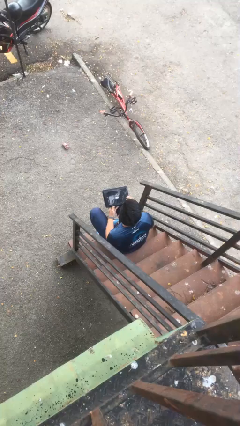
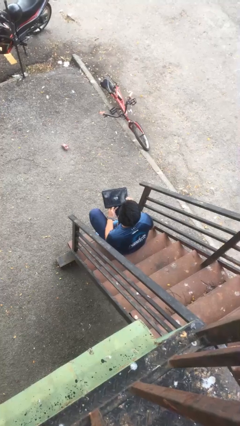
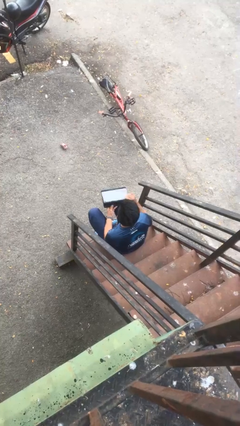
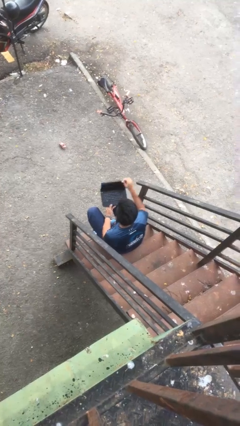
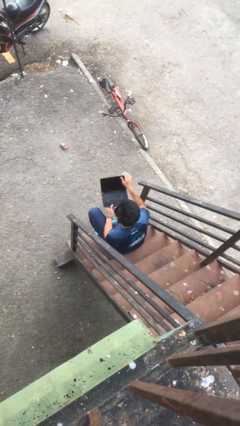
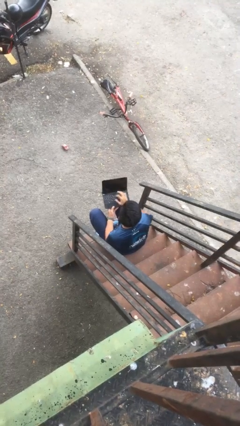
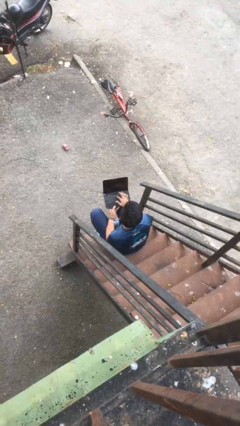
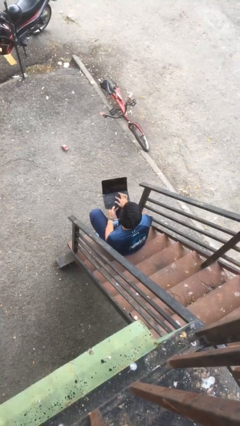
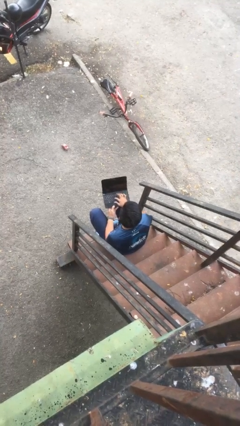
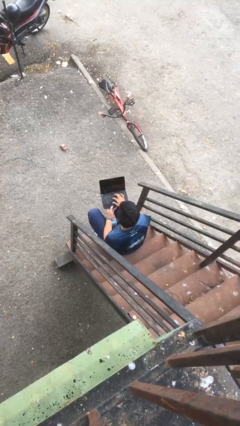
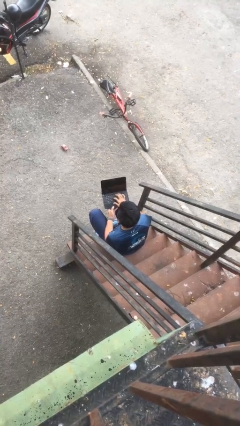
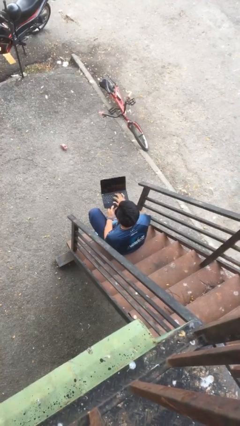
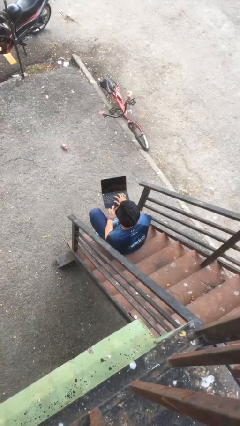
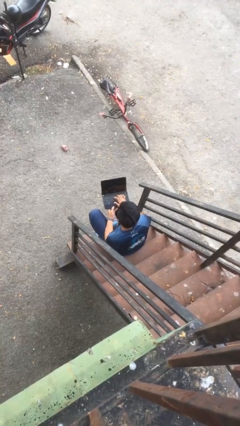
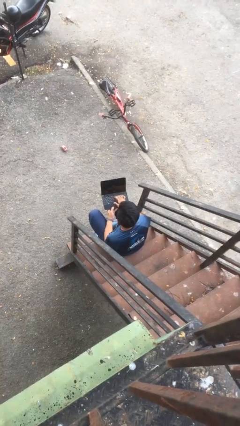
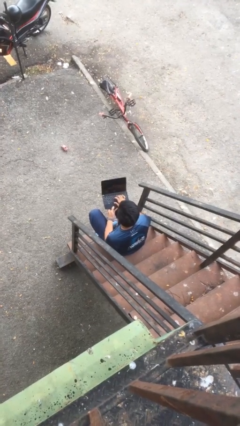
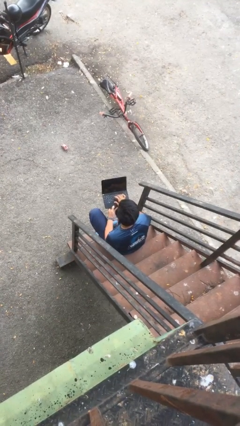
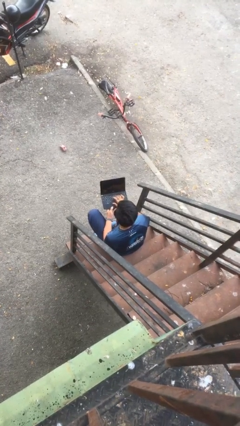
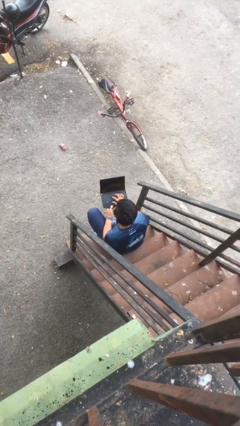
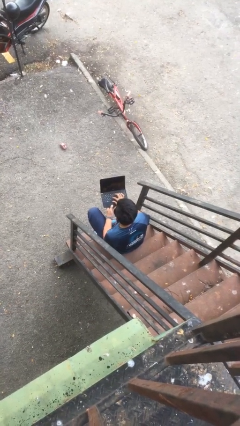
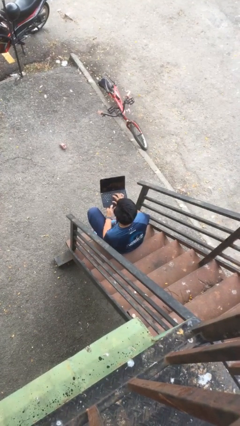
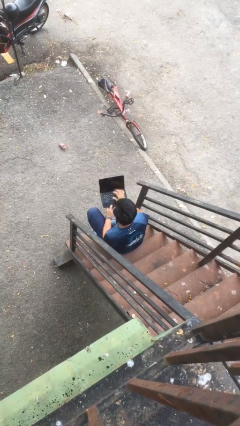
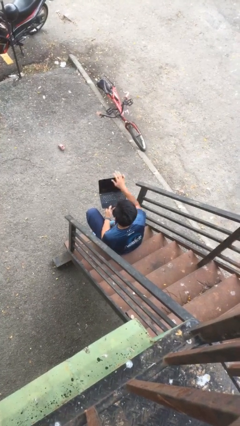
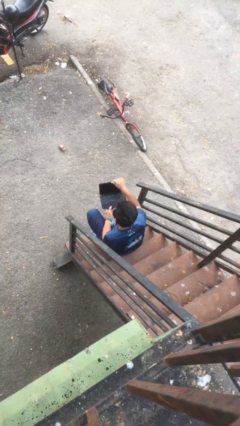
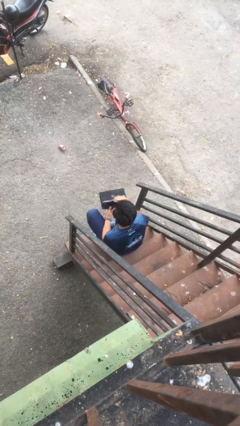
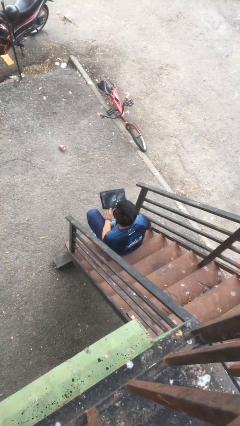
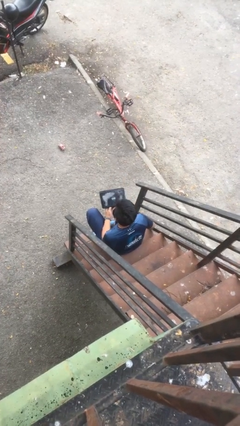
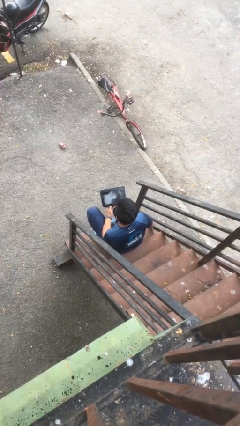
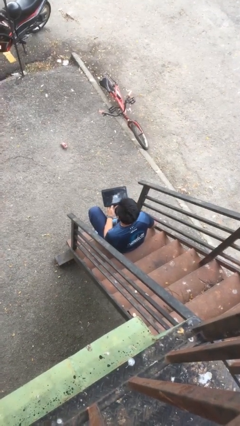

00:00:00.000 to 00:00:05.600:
person interacts with laptop

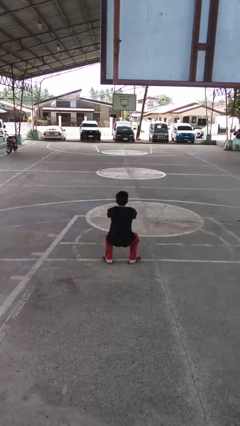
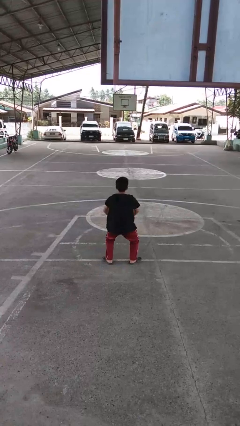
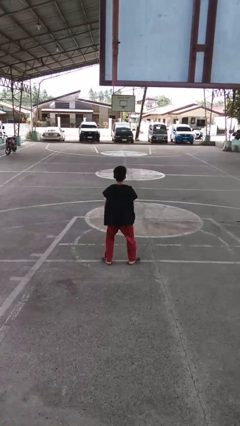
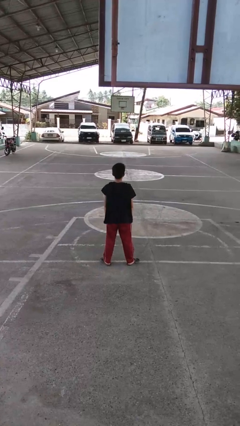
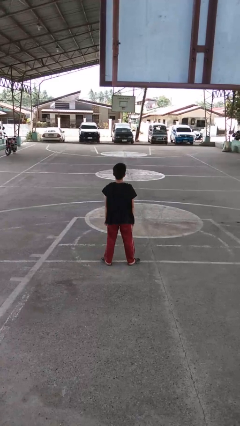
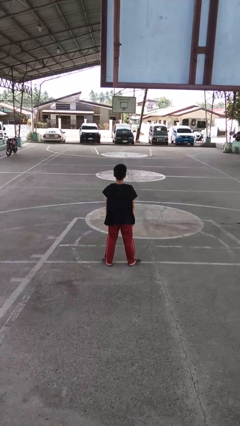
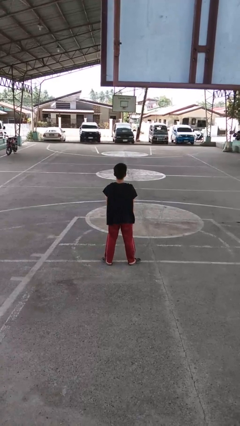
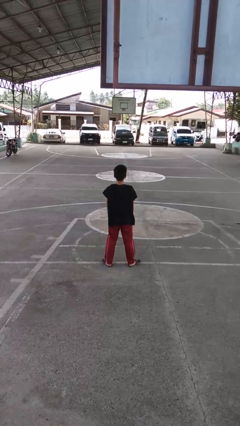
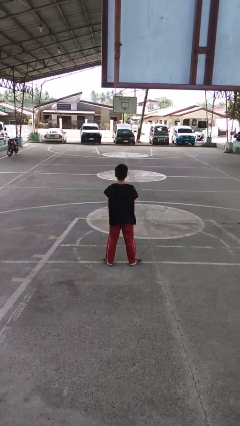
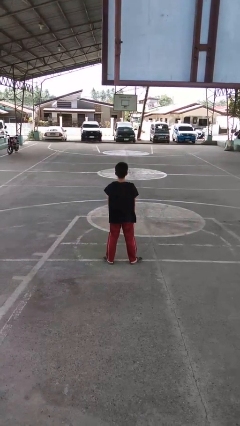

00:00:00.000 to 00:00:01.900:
person stands up

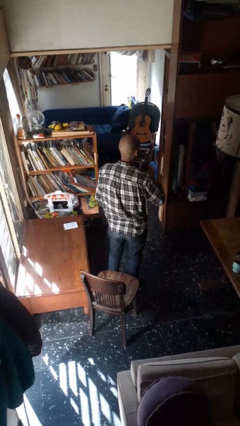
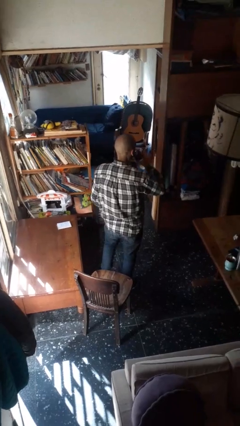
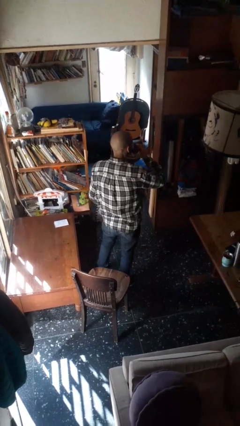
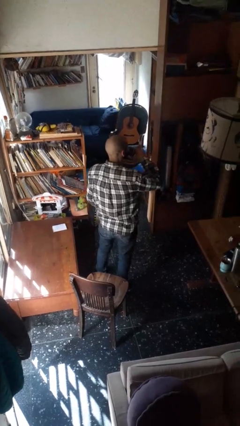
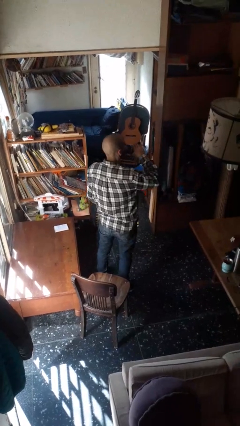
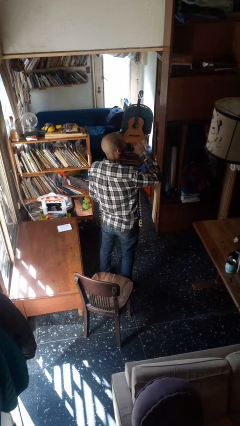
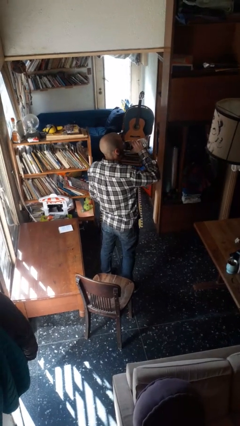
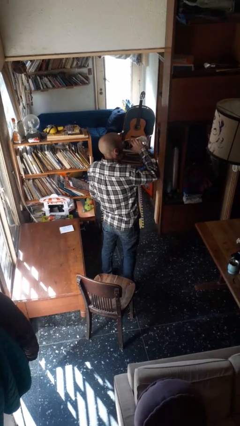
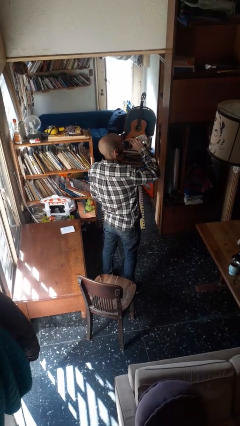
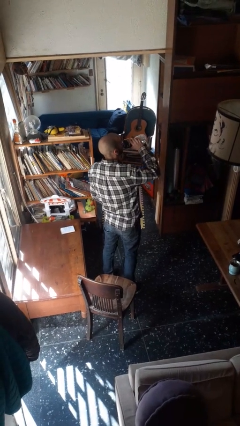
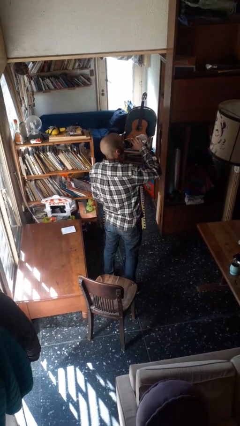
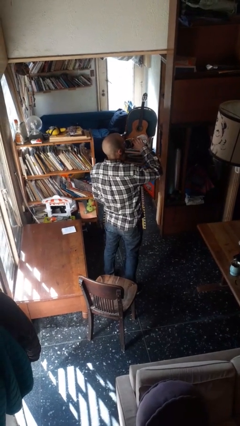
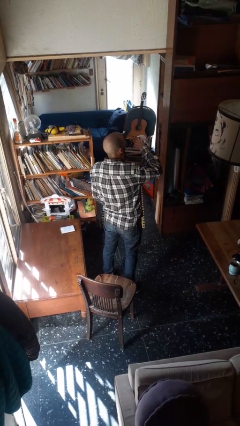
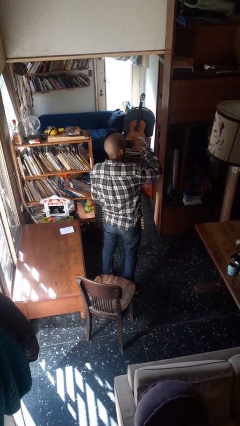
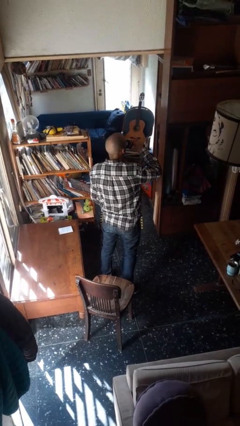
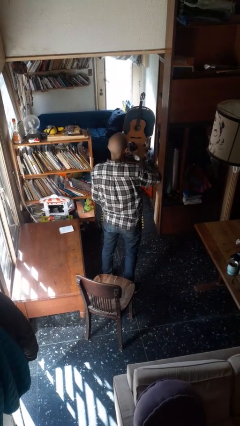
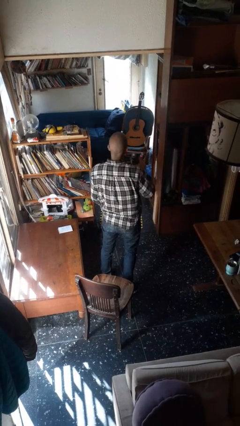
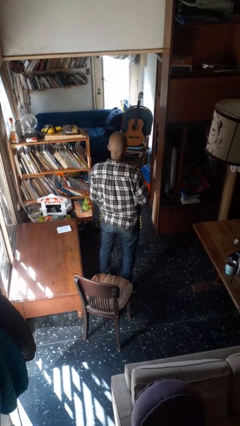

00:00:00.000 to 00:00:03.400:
person drinks from bottle

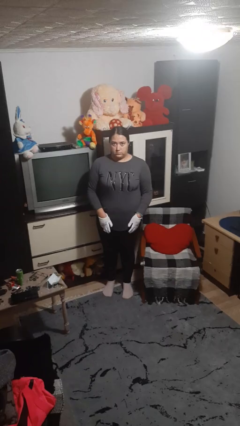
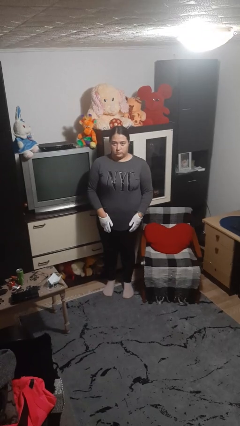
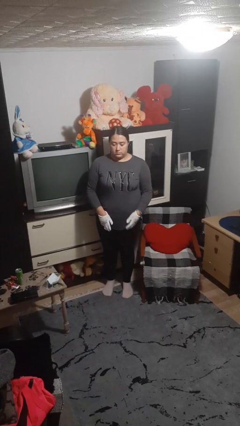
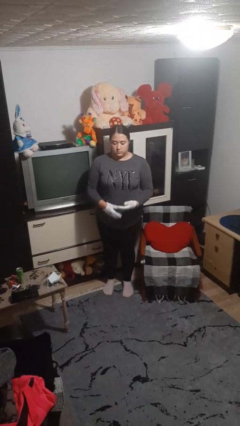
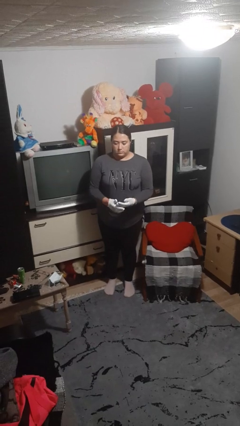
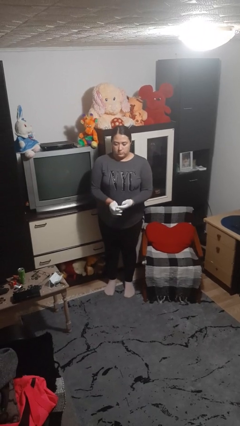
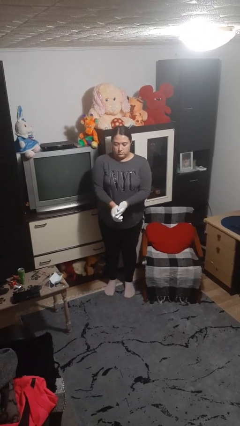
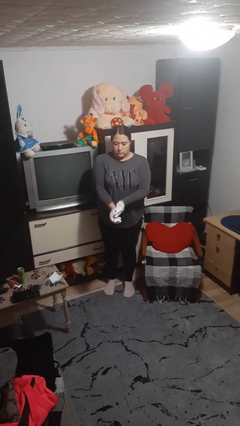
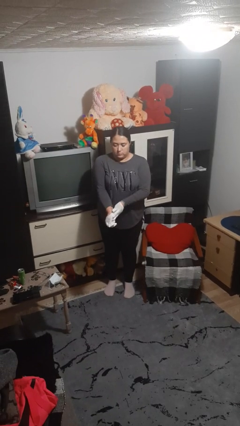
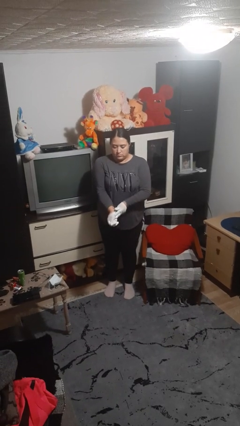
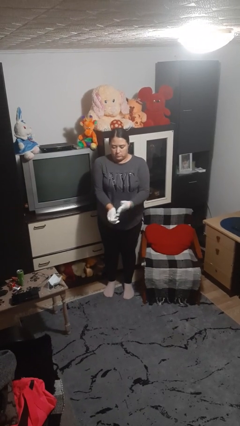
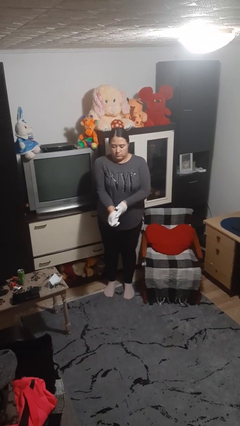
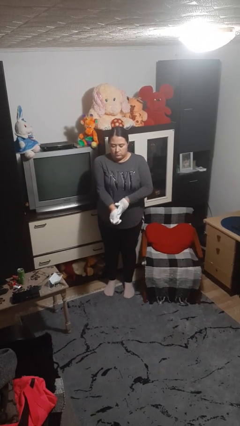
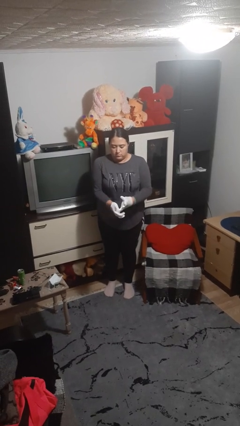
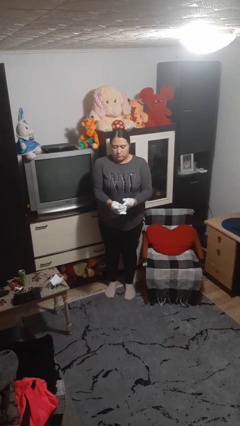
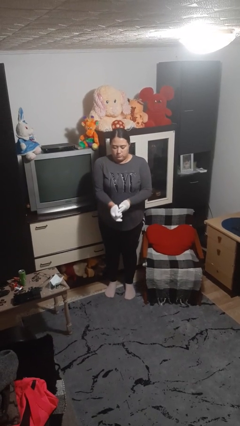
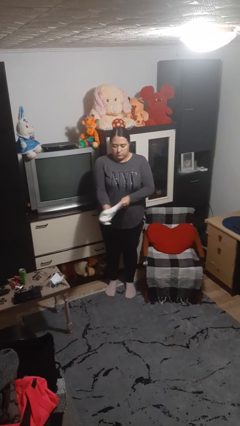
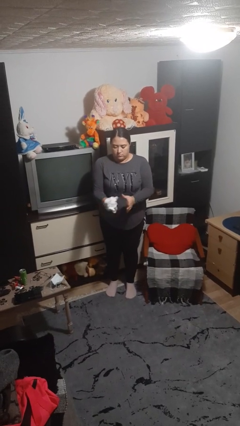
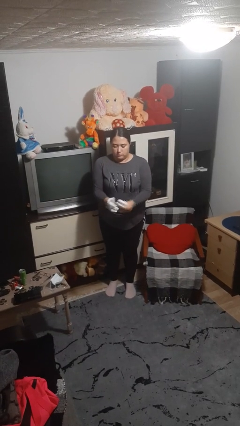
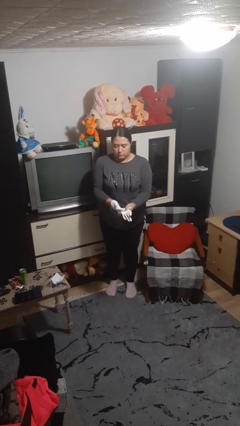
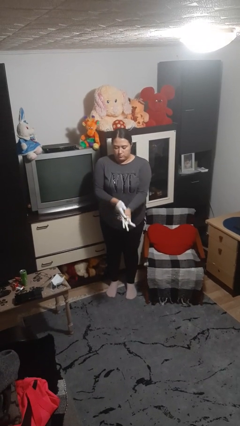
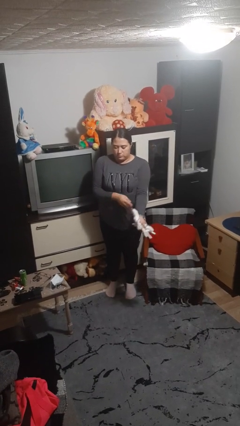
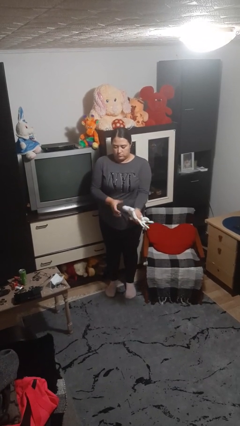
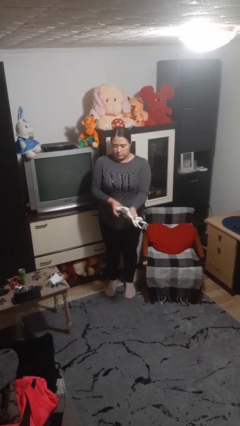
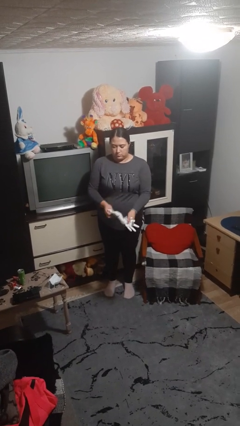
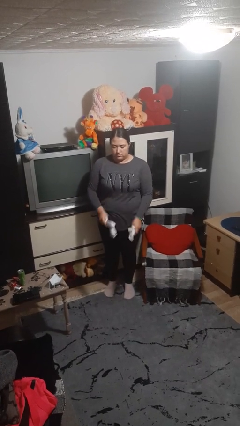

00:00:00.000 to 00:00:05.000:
person takes off gloves

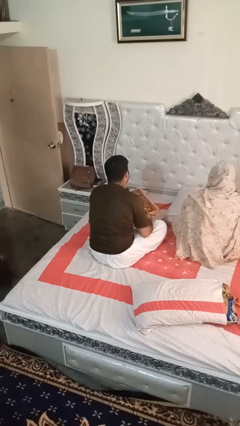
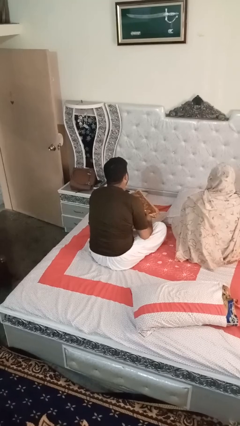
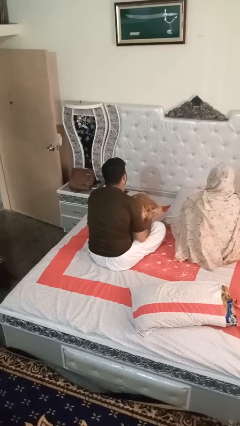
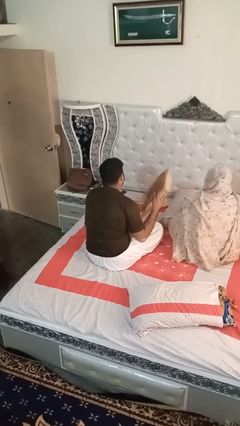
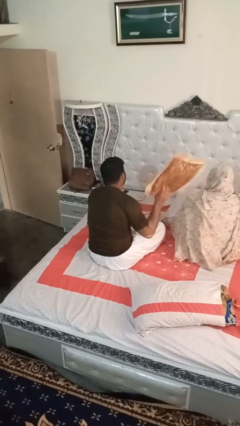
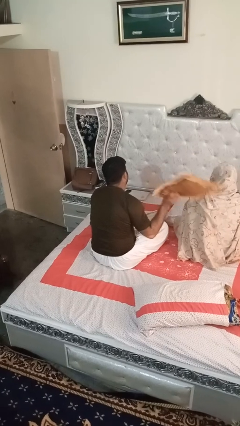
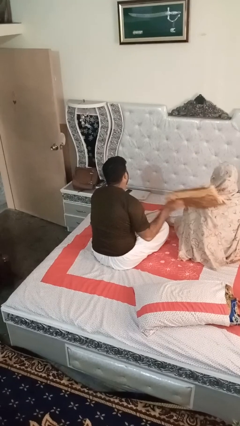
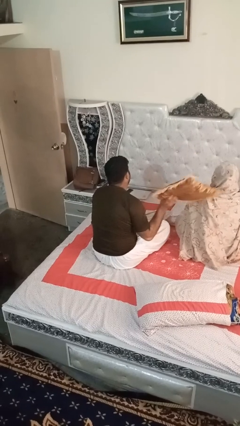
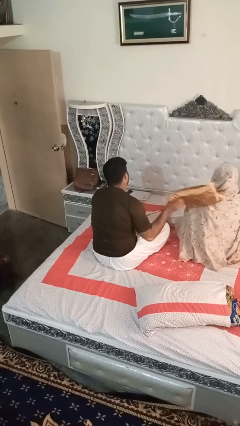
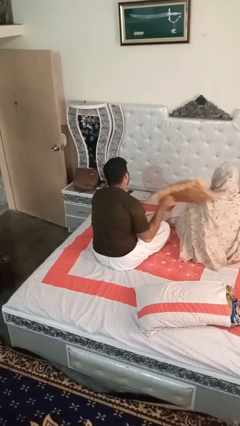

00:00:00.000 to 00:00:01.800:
person hits person with pillow

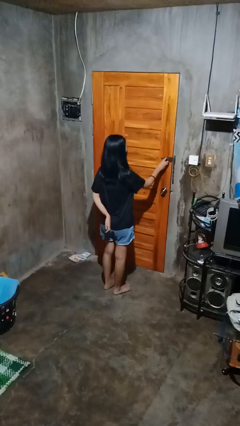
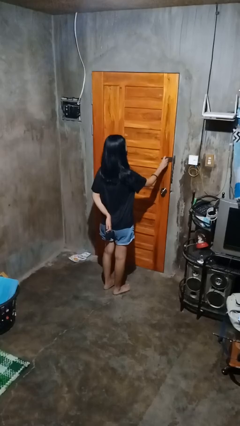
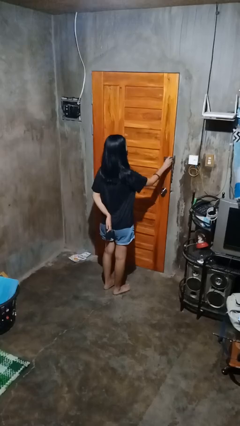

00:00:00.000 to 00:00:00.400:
person locks door with keys
